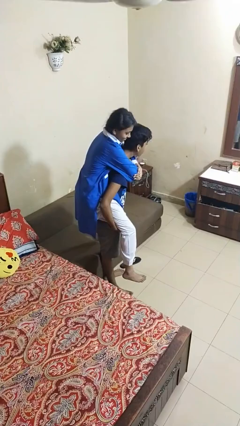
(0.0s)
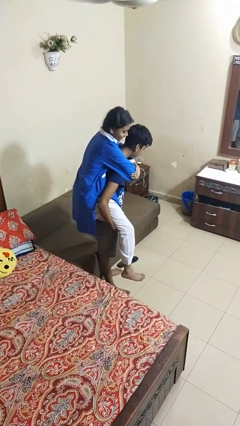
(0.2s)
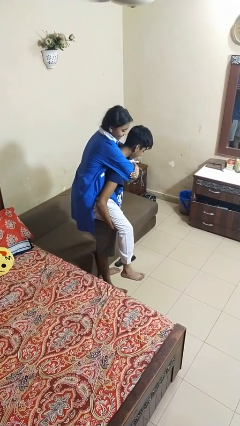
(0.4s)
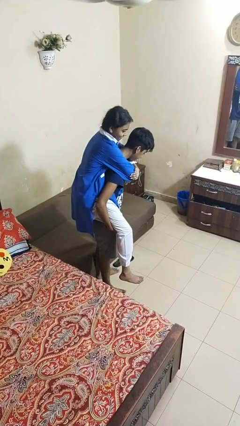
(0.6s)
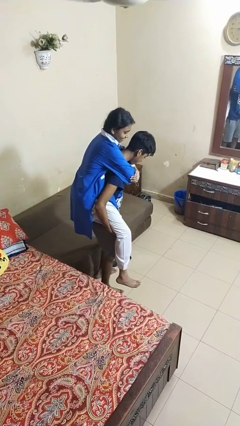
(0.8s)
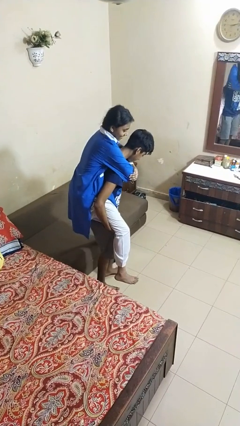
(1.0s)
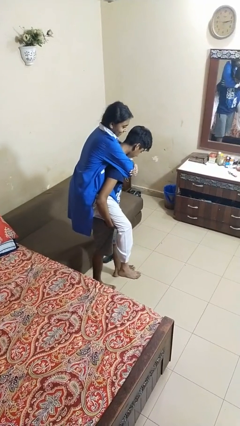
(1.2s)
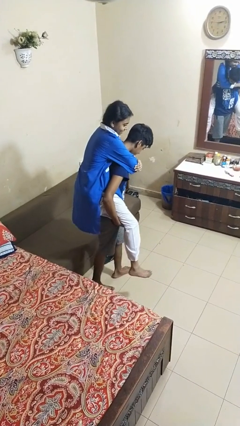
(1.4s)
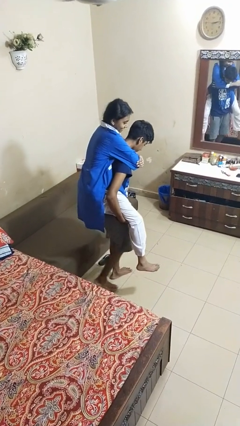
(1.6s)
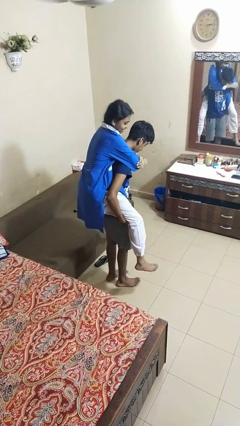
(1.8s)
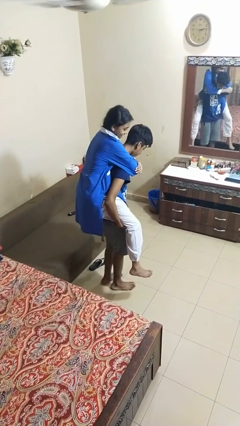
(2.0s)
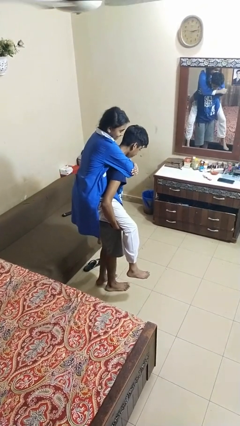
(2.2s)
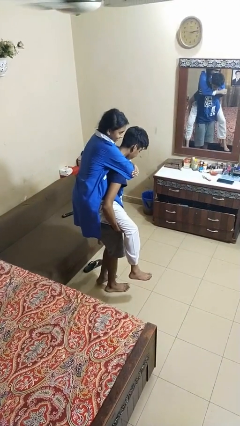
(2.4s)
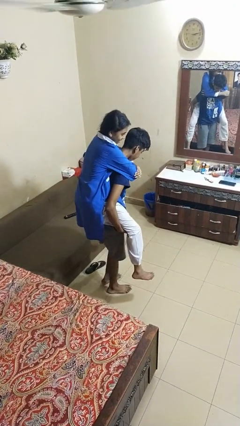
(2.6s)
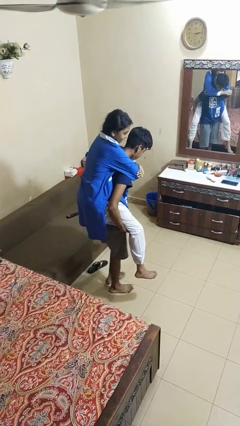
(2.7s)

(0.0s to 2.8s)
person carries person on back

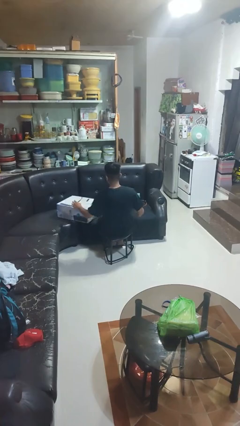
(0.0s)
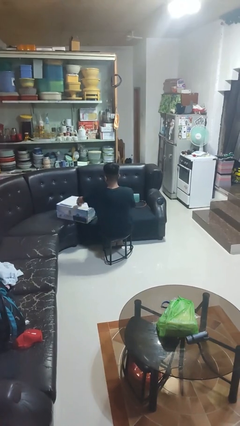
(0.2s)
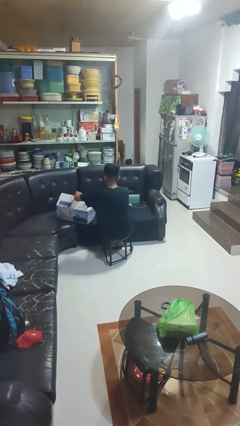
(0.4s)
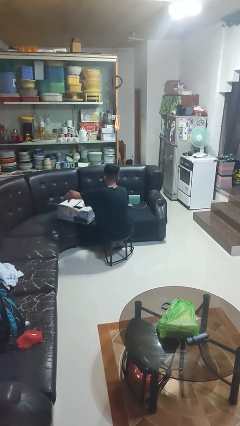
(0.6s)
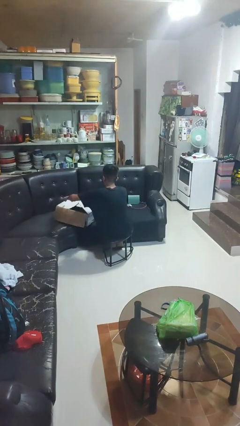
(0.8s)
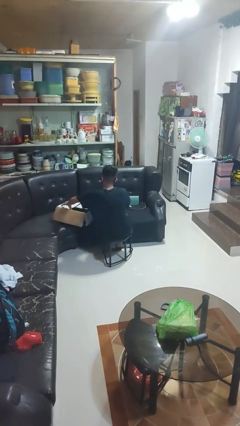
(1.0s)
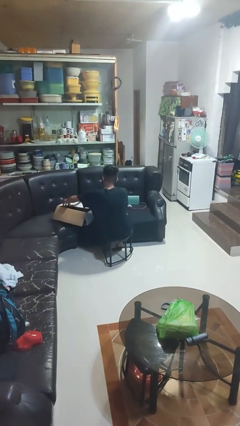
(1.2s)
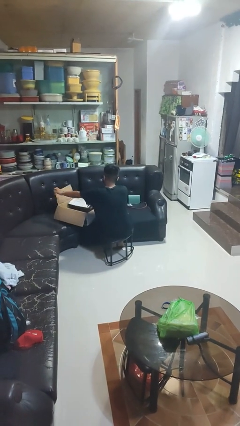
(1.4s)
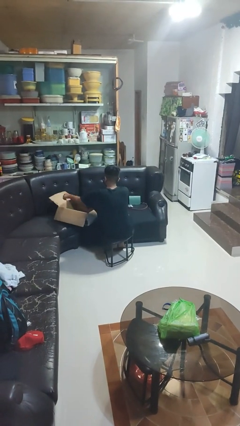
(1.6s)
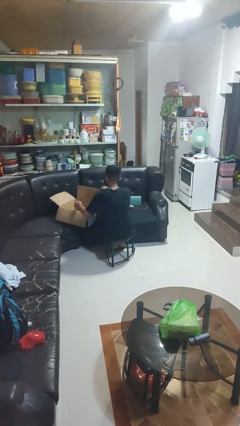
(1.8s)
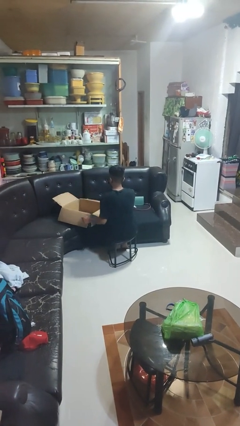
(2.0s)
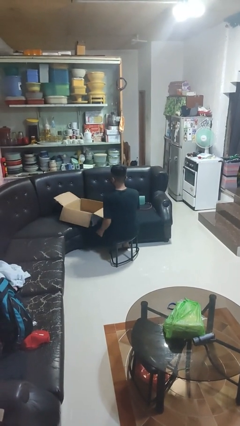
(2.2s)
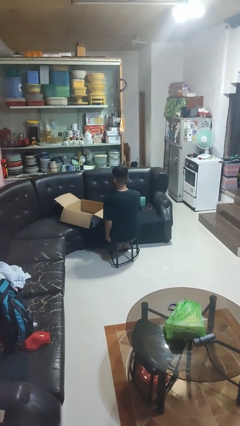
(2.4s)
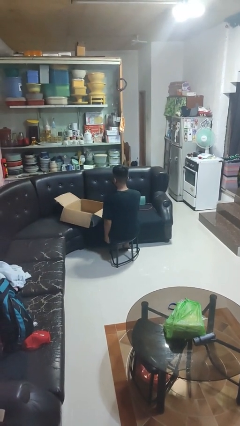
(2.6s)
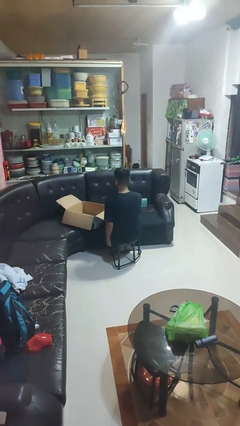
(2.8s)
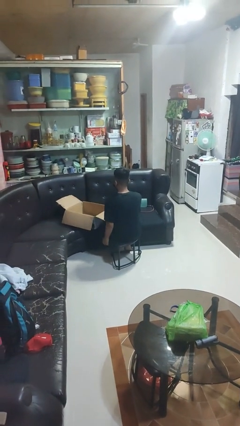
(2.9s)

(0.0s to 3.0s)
person opens box

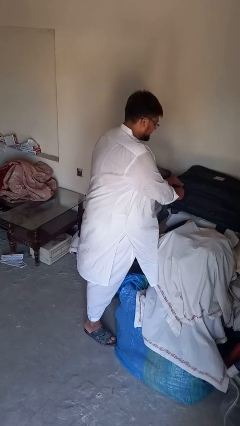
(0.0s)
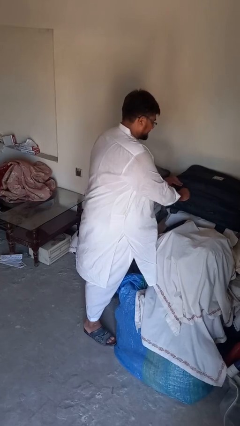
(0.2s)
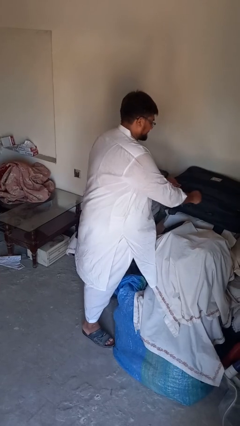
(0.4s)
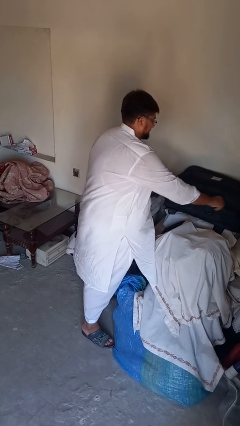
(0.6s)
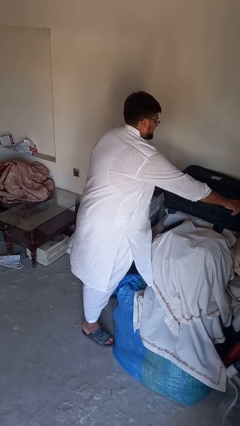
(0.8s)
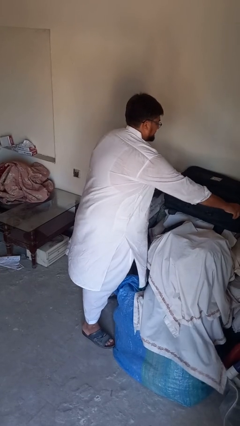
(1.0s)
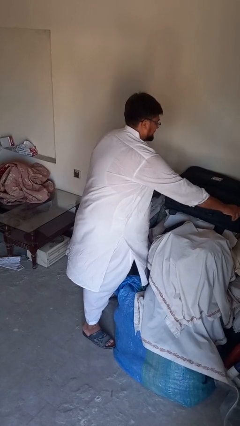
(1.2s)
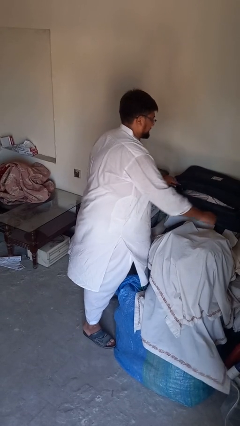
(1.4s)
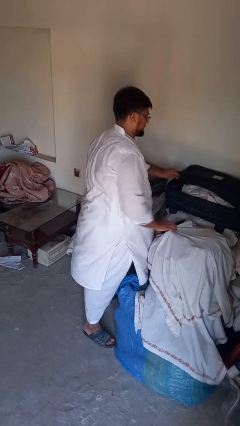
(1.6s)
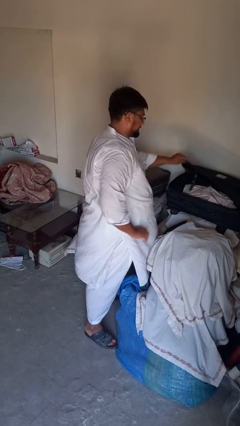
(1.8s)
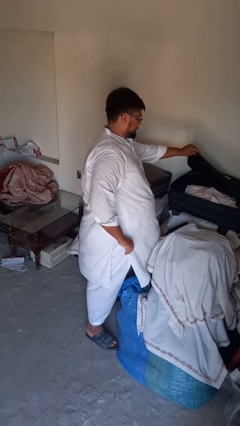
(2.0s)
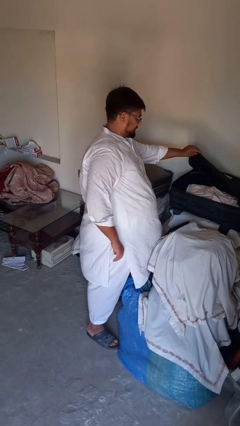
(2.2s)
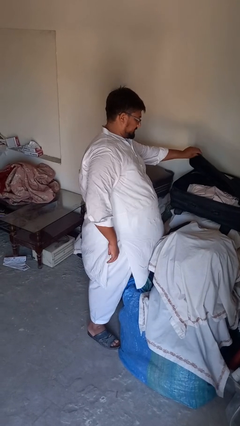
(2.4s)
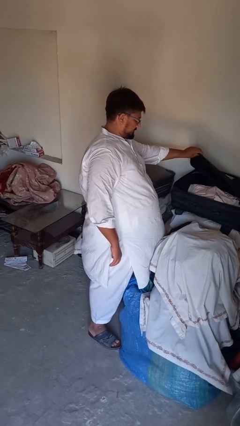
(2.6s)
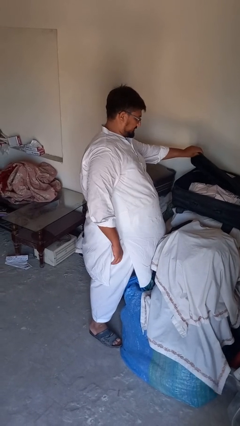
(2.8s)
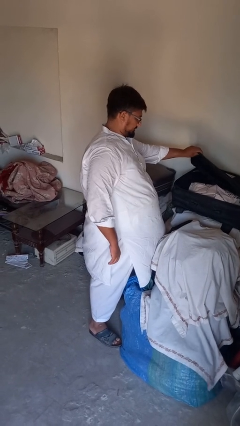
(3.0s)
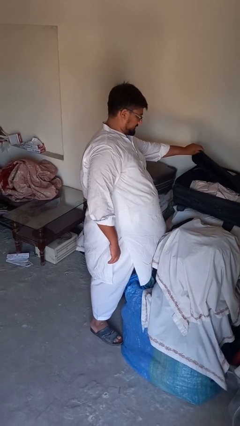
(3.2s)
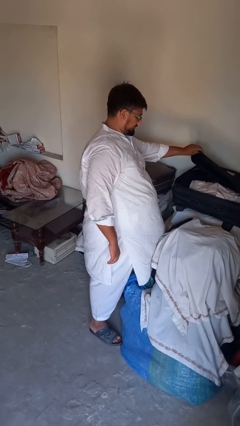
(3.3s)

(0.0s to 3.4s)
person opens suitcase

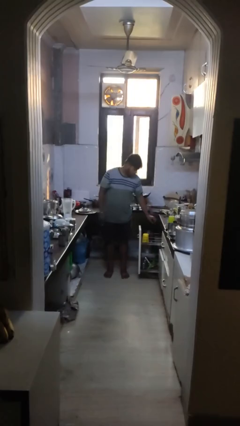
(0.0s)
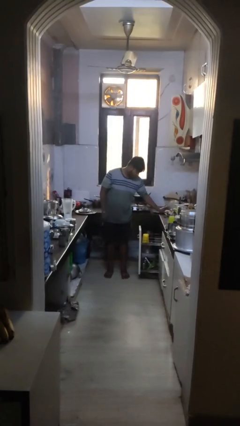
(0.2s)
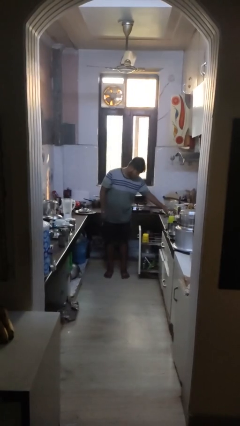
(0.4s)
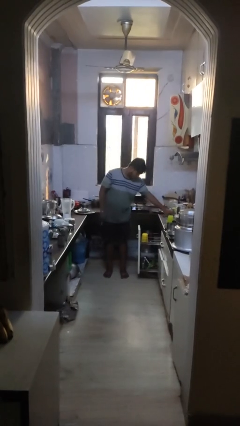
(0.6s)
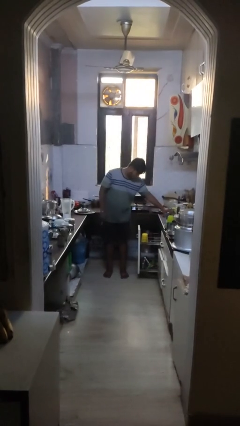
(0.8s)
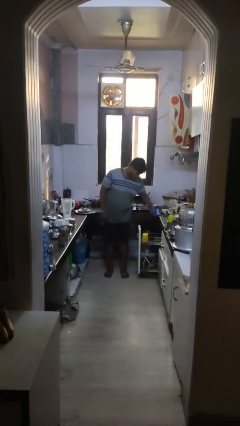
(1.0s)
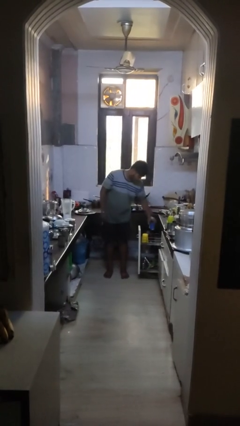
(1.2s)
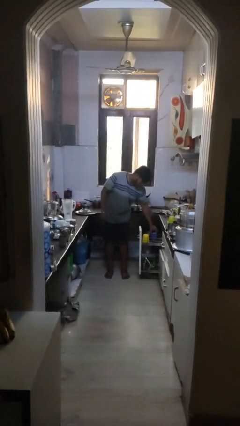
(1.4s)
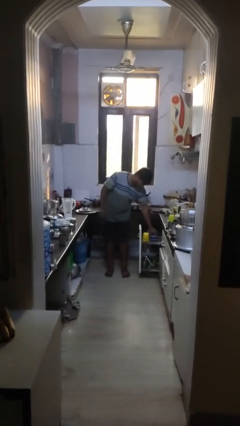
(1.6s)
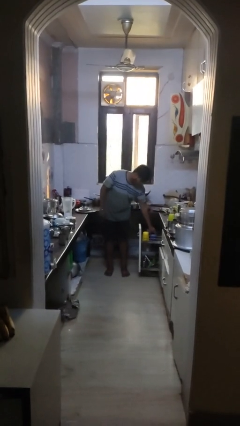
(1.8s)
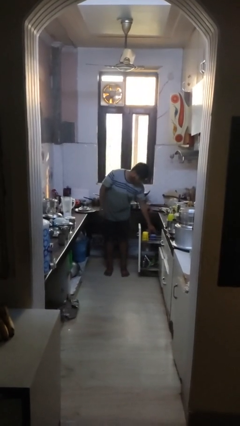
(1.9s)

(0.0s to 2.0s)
person loads dishwasher

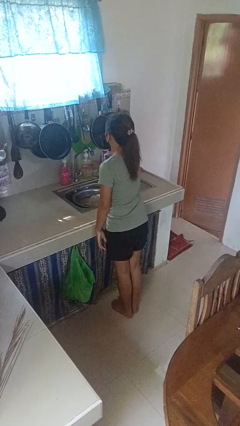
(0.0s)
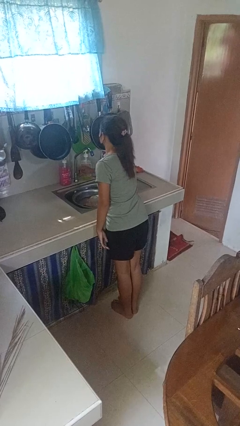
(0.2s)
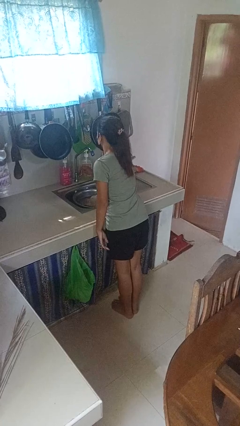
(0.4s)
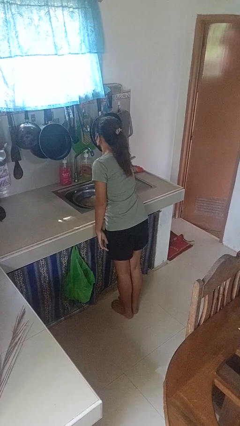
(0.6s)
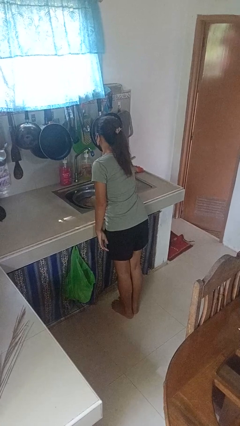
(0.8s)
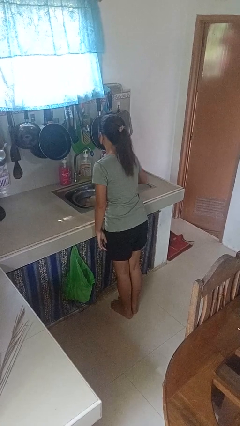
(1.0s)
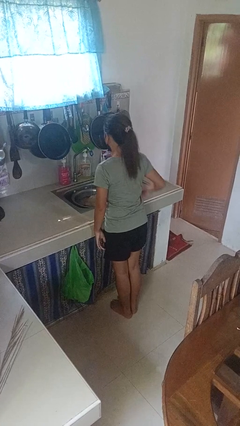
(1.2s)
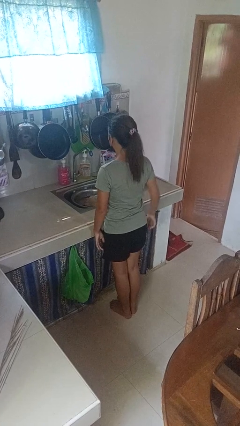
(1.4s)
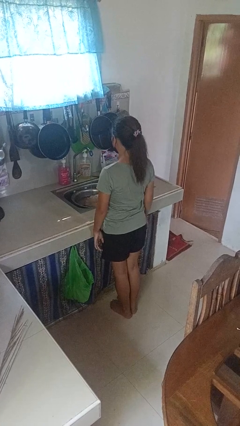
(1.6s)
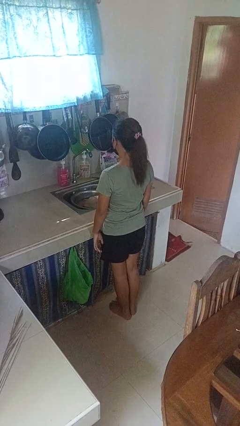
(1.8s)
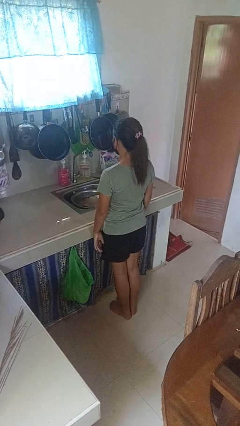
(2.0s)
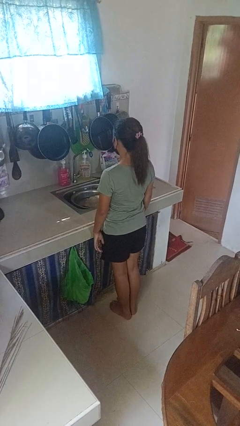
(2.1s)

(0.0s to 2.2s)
person turns on faucet

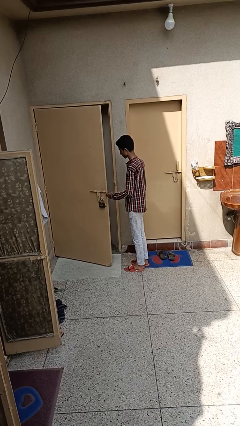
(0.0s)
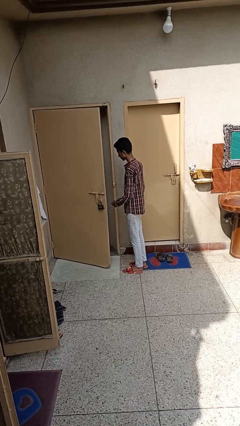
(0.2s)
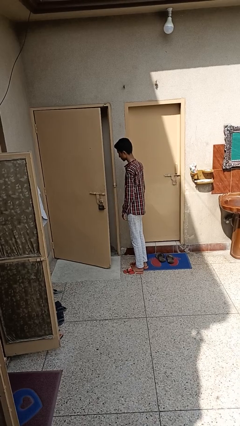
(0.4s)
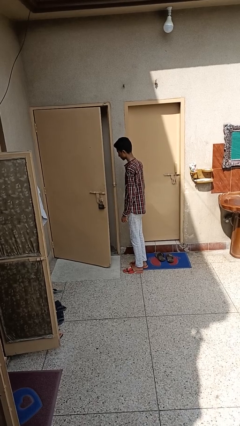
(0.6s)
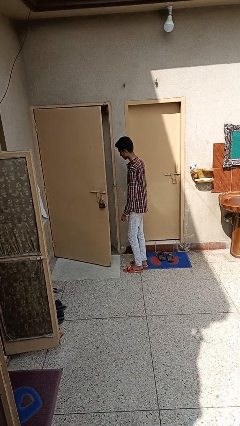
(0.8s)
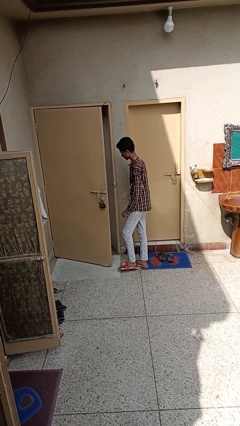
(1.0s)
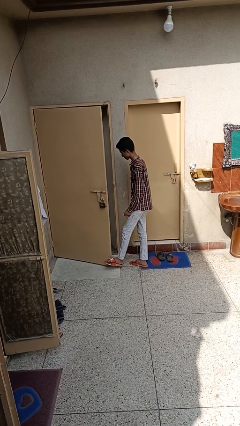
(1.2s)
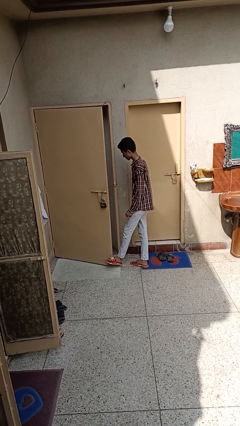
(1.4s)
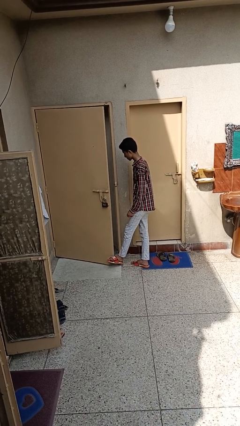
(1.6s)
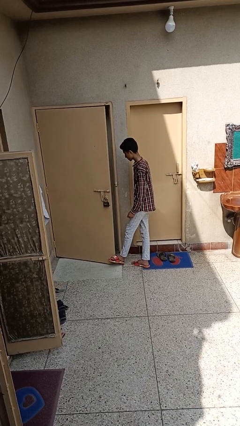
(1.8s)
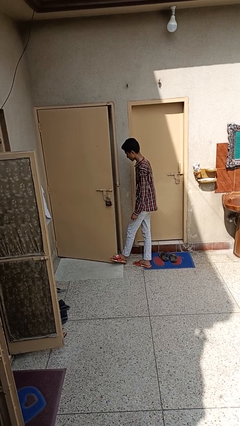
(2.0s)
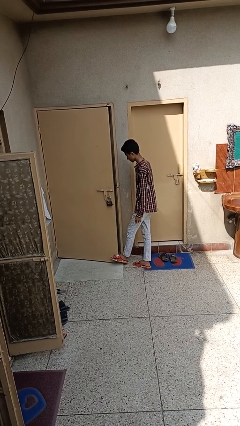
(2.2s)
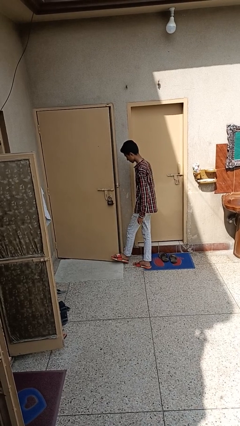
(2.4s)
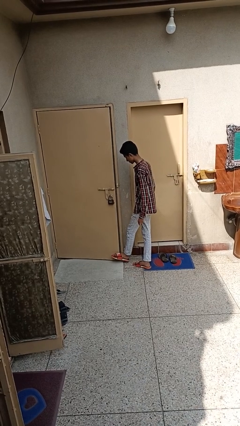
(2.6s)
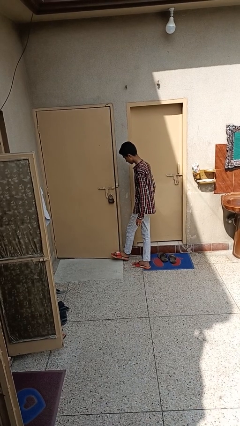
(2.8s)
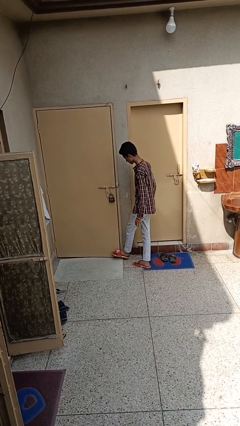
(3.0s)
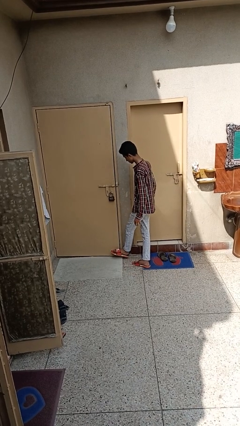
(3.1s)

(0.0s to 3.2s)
person closes door with foot

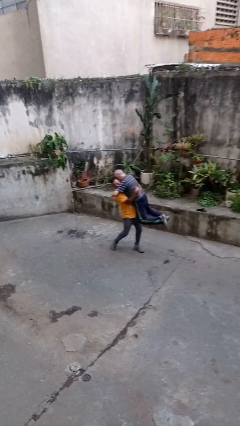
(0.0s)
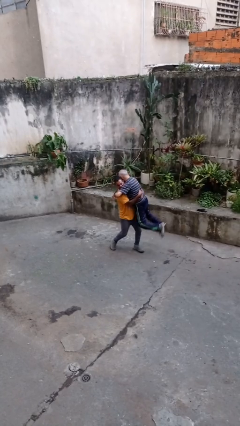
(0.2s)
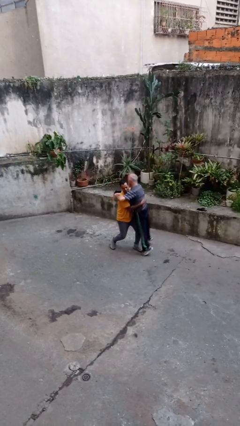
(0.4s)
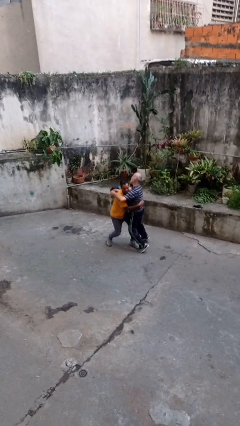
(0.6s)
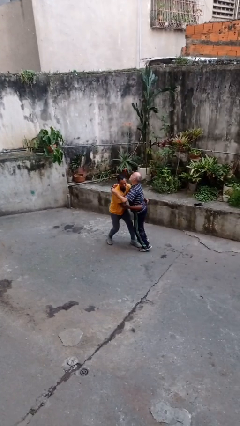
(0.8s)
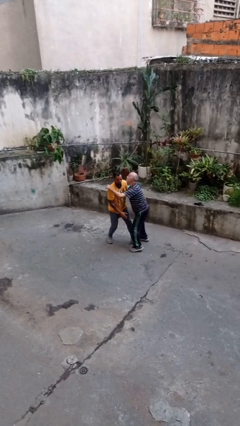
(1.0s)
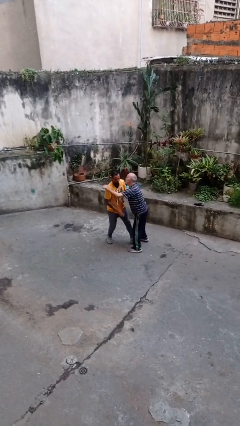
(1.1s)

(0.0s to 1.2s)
person puts down person
